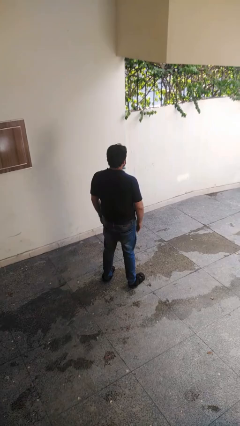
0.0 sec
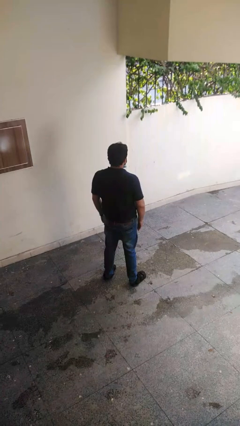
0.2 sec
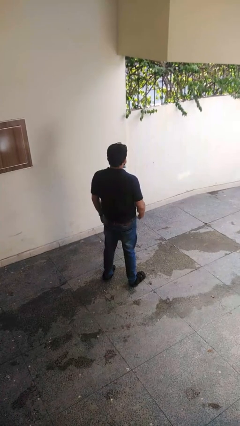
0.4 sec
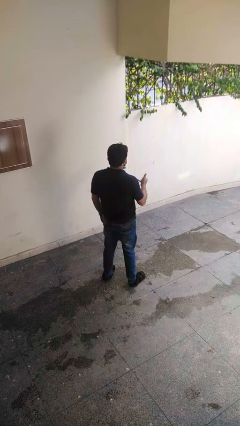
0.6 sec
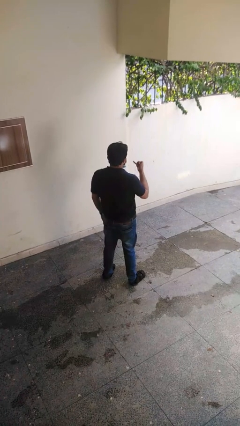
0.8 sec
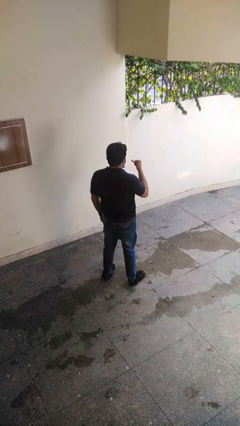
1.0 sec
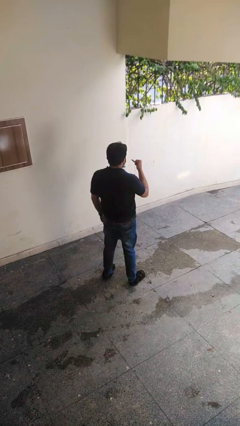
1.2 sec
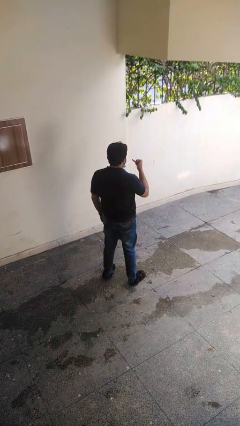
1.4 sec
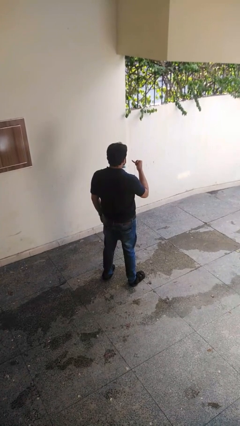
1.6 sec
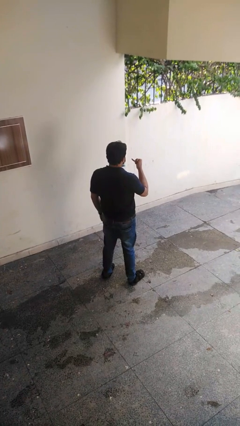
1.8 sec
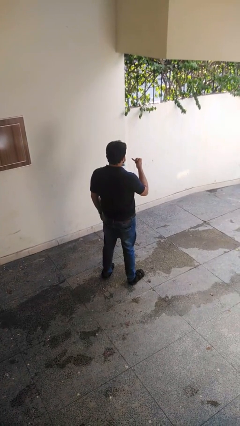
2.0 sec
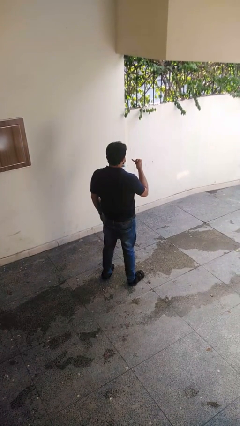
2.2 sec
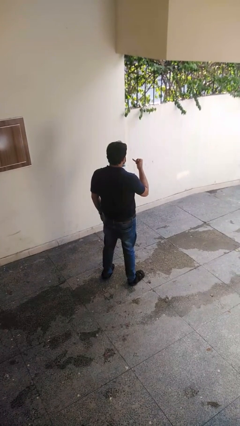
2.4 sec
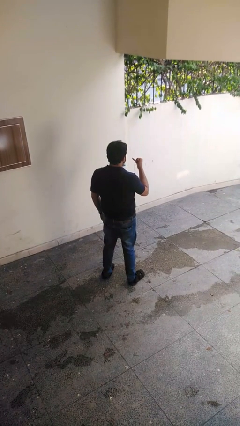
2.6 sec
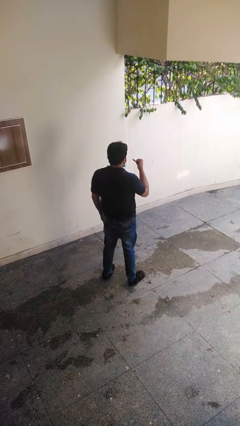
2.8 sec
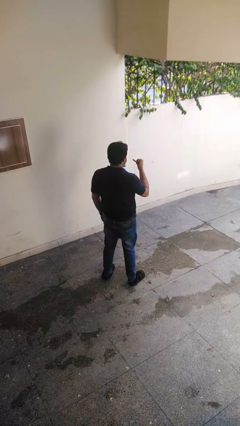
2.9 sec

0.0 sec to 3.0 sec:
person gestures hang loose

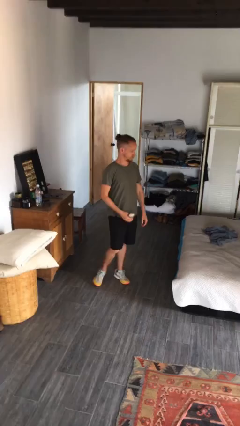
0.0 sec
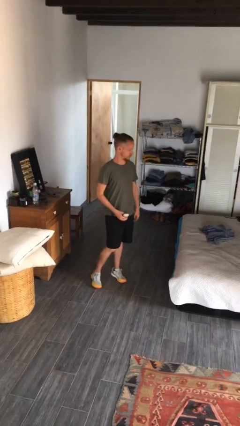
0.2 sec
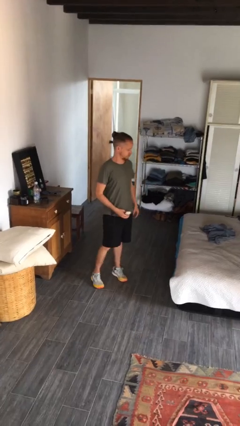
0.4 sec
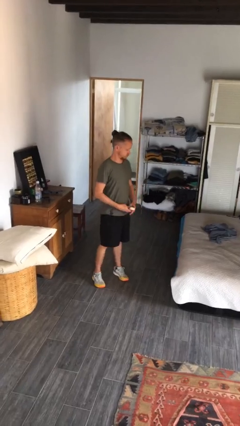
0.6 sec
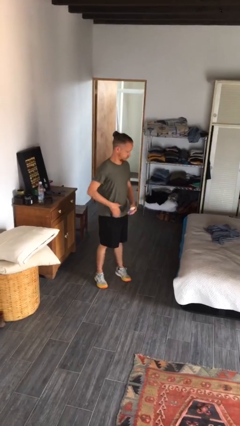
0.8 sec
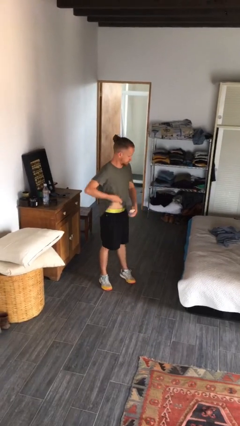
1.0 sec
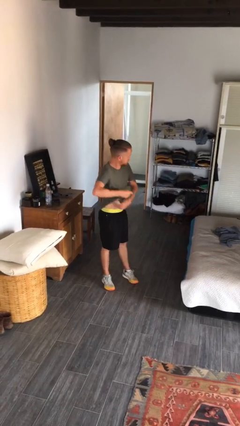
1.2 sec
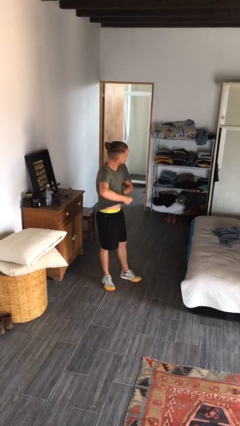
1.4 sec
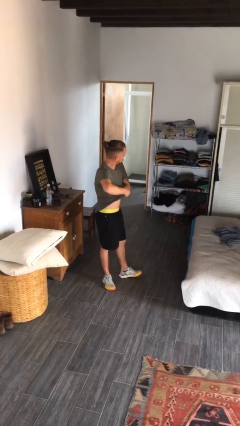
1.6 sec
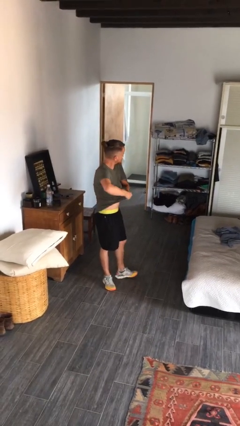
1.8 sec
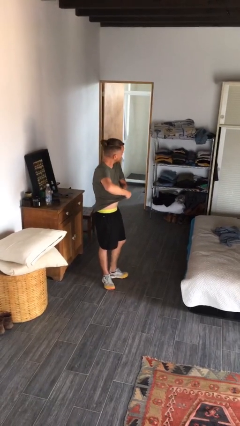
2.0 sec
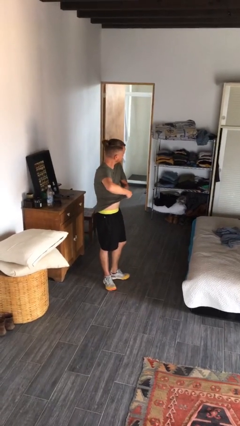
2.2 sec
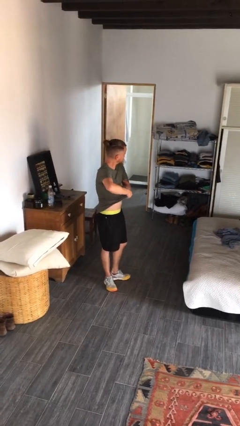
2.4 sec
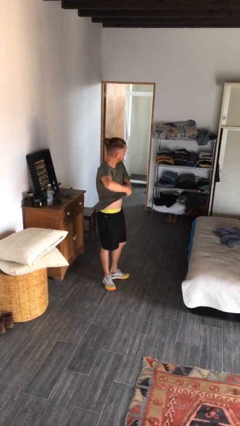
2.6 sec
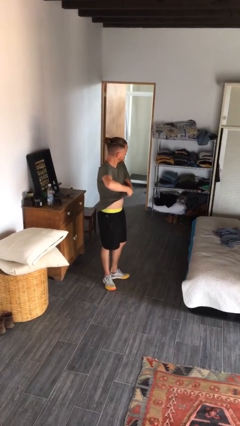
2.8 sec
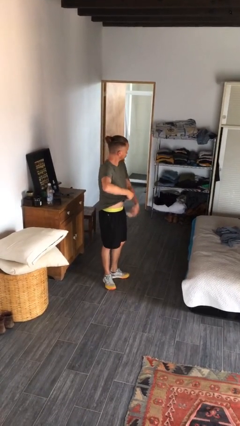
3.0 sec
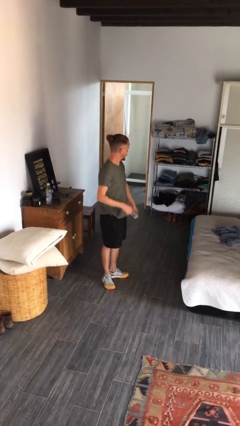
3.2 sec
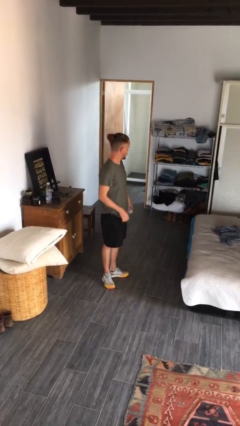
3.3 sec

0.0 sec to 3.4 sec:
person applies deodorant

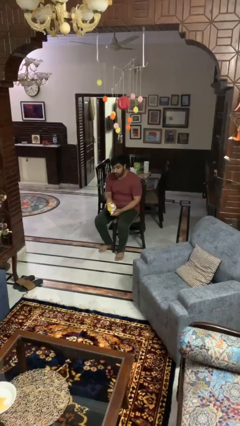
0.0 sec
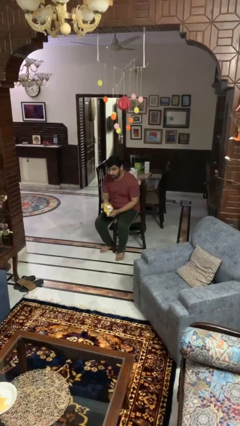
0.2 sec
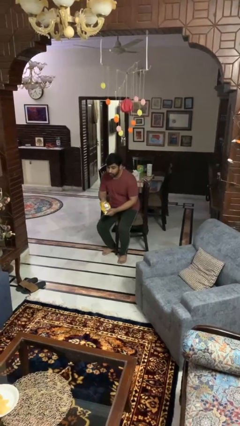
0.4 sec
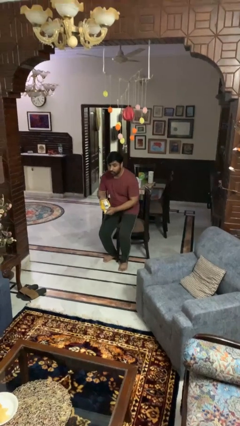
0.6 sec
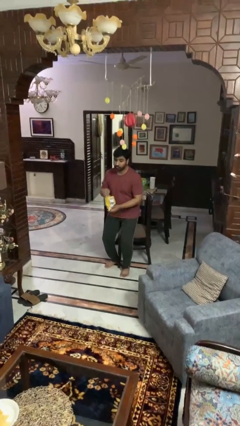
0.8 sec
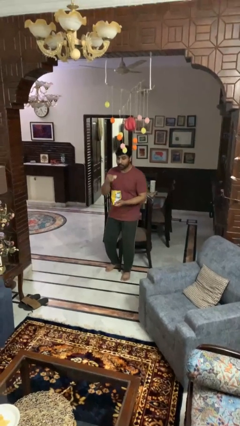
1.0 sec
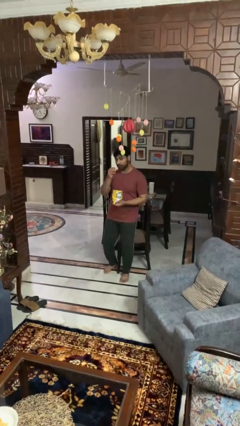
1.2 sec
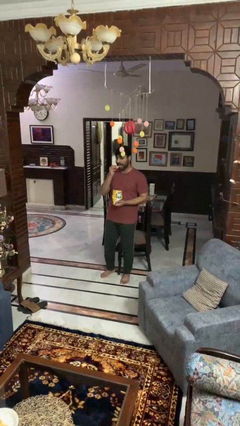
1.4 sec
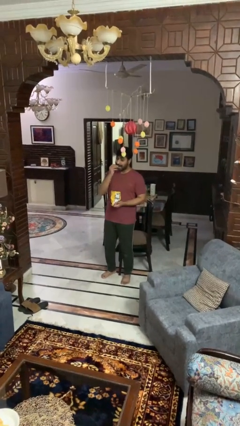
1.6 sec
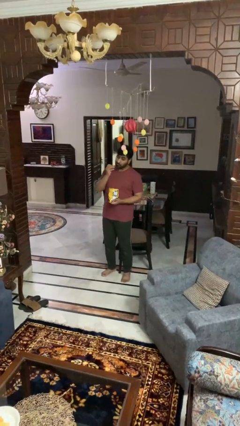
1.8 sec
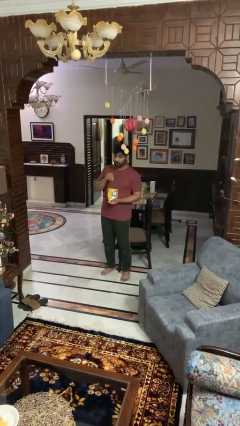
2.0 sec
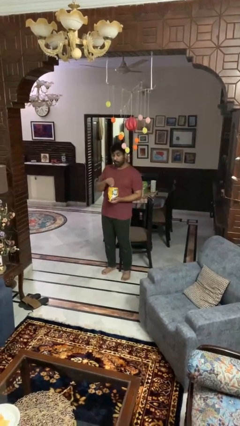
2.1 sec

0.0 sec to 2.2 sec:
person eats snack from bag

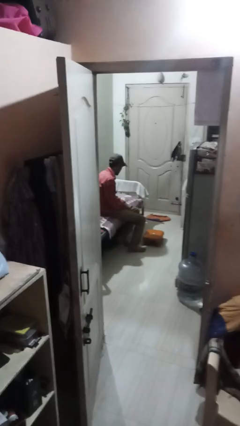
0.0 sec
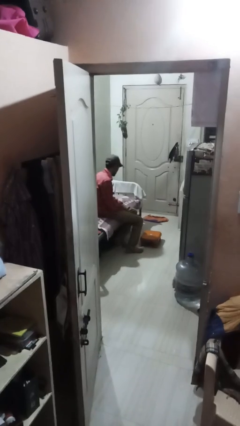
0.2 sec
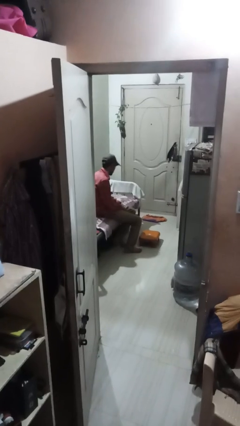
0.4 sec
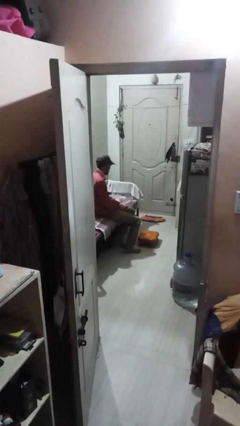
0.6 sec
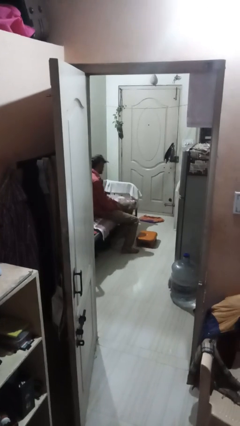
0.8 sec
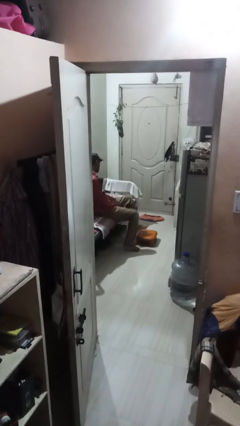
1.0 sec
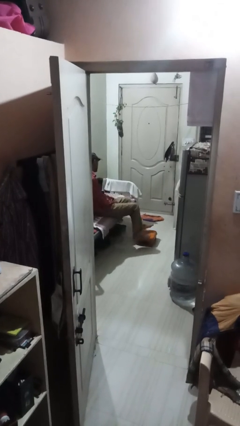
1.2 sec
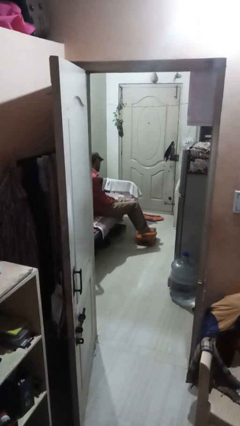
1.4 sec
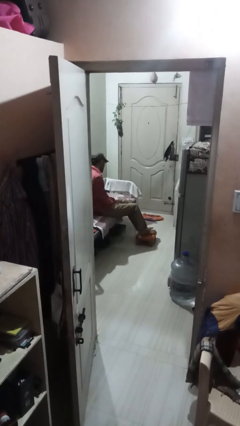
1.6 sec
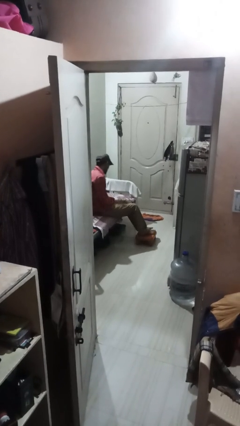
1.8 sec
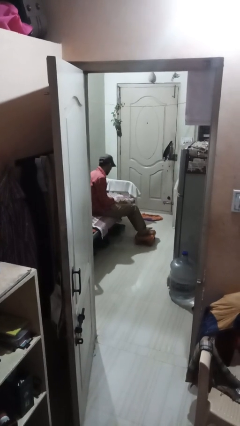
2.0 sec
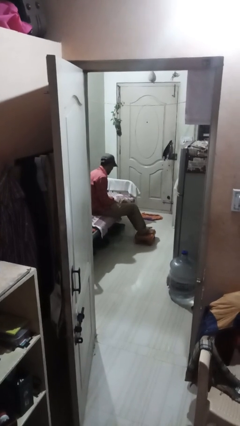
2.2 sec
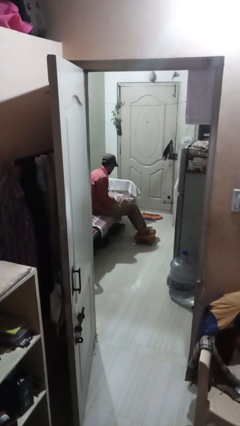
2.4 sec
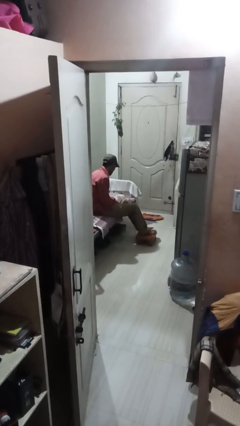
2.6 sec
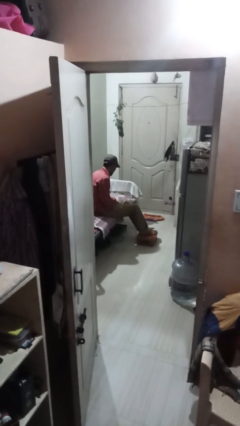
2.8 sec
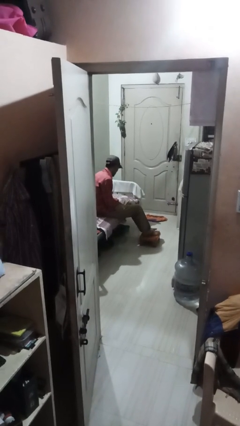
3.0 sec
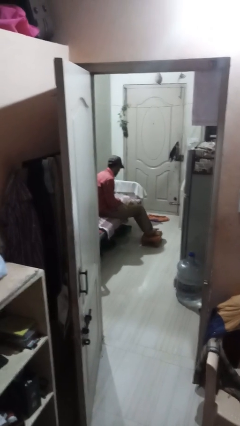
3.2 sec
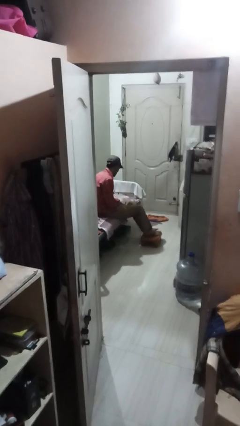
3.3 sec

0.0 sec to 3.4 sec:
person puts feet up

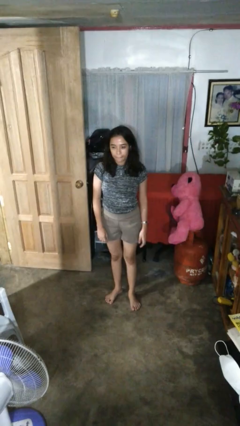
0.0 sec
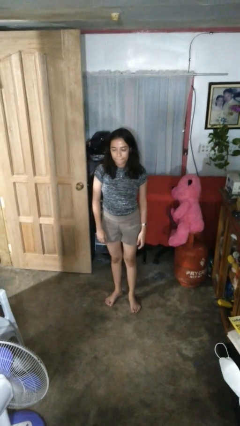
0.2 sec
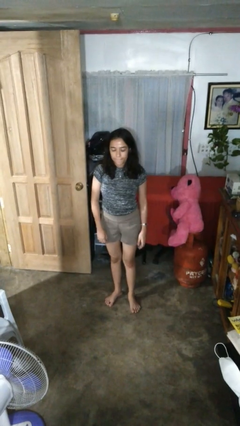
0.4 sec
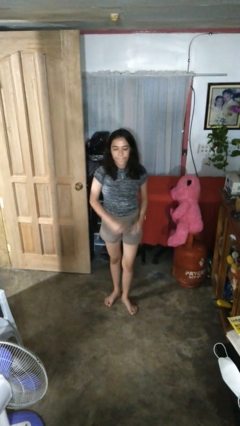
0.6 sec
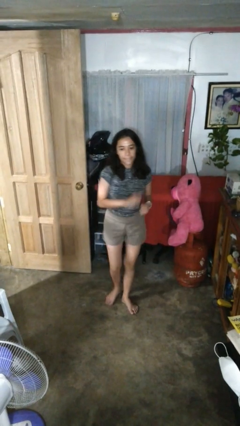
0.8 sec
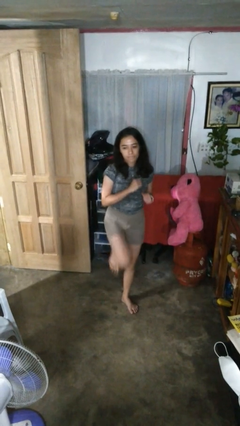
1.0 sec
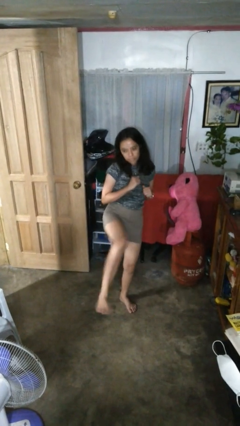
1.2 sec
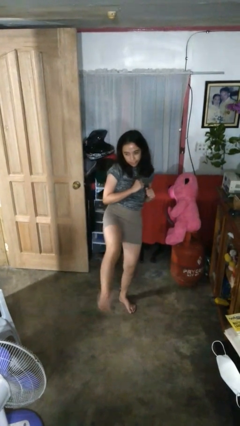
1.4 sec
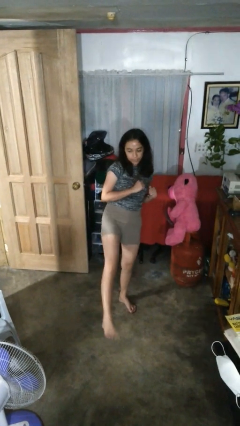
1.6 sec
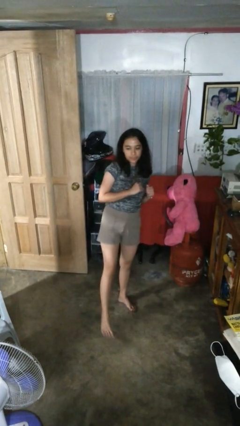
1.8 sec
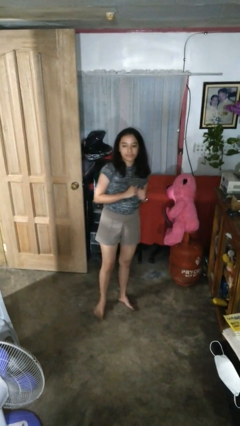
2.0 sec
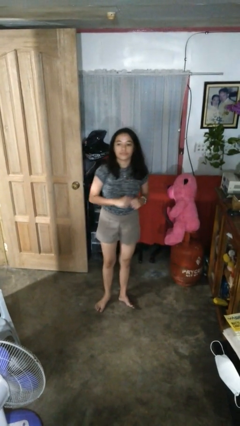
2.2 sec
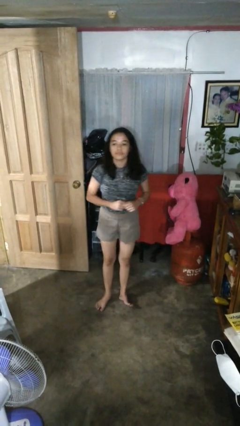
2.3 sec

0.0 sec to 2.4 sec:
person karate kicks

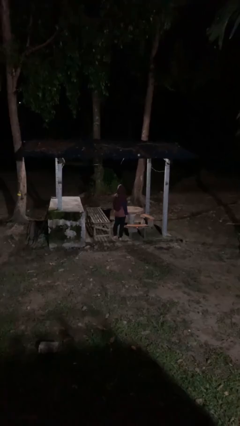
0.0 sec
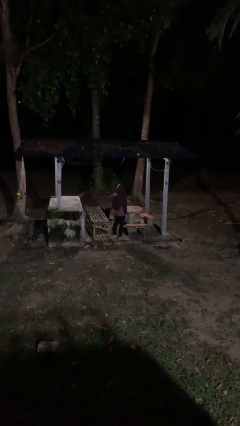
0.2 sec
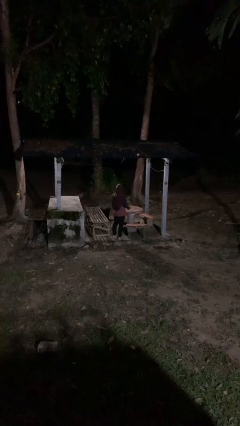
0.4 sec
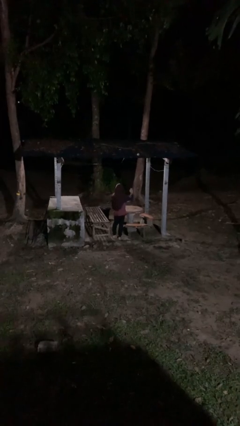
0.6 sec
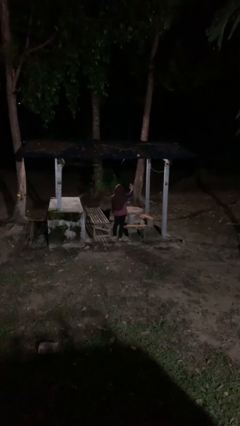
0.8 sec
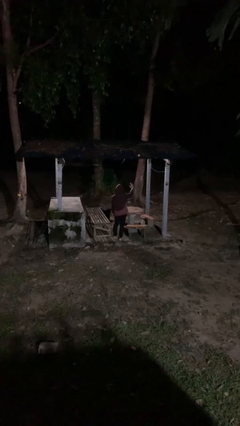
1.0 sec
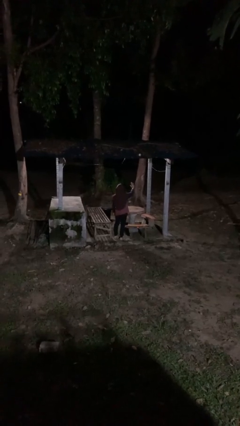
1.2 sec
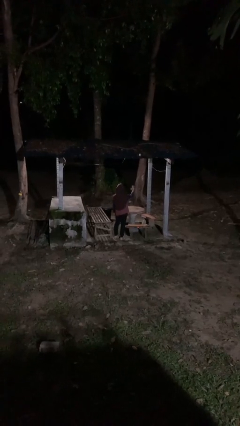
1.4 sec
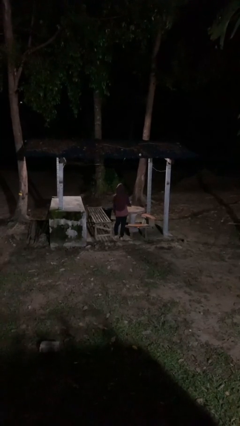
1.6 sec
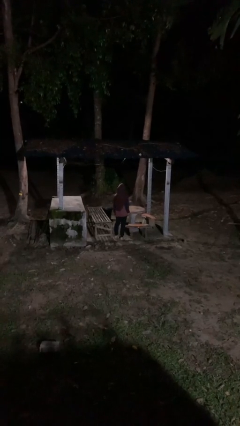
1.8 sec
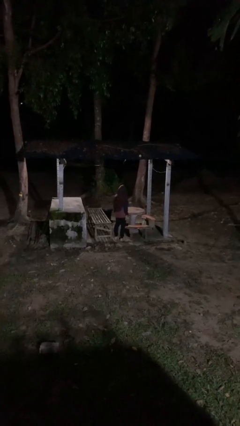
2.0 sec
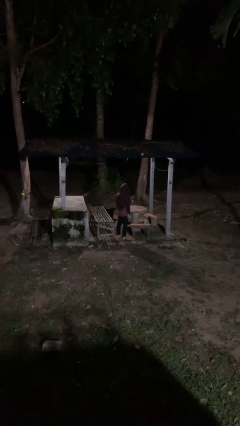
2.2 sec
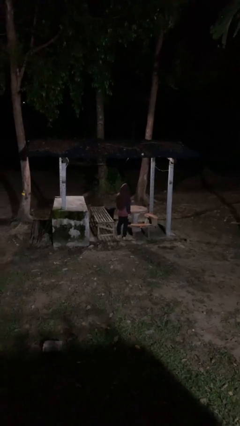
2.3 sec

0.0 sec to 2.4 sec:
person gestures stop

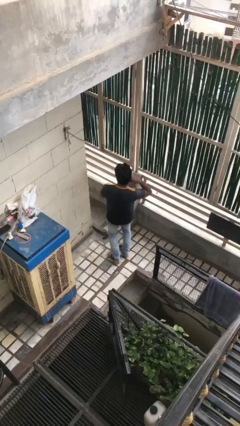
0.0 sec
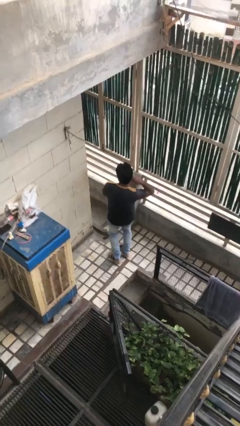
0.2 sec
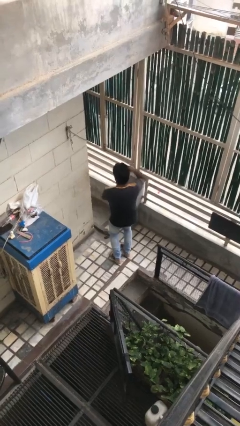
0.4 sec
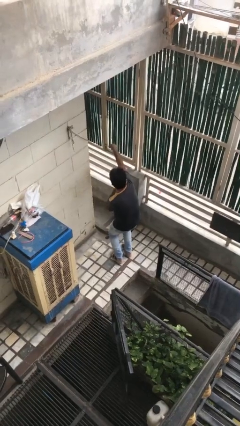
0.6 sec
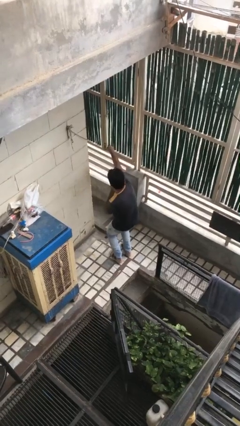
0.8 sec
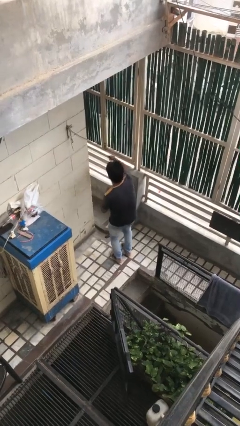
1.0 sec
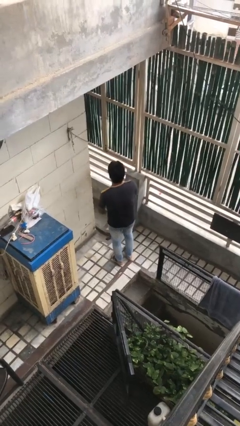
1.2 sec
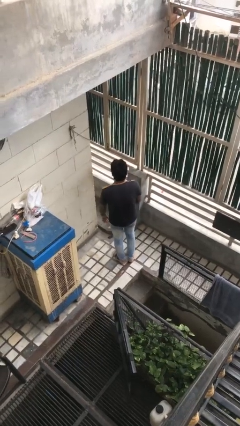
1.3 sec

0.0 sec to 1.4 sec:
person karate chop
